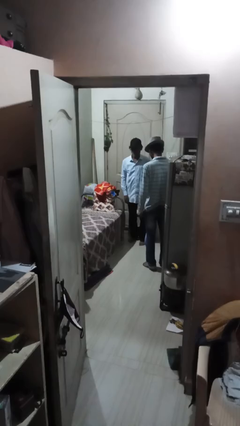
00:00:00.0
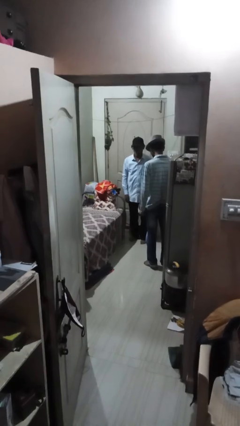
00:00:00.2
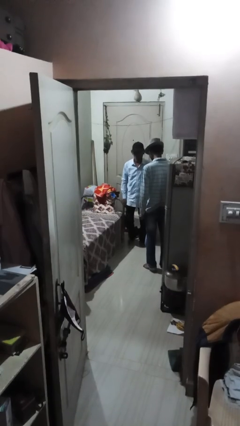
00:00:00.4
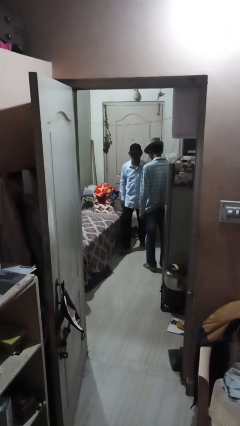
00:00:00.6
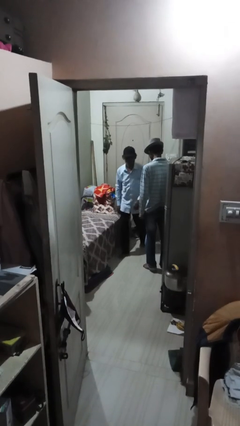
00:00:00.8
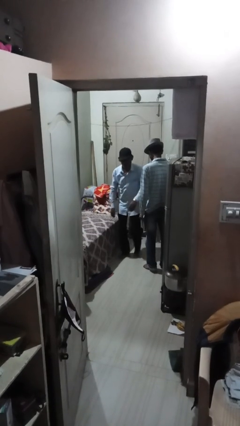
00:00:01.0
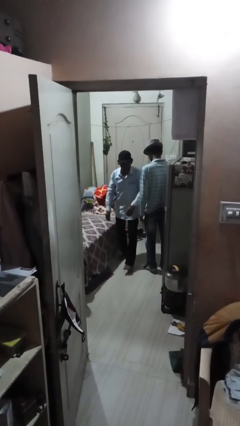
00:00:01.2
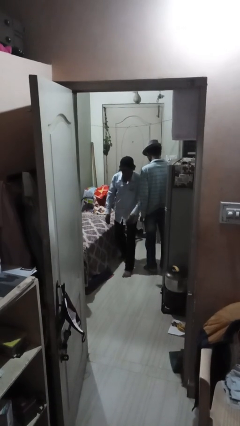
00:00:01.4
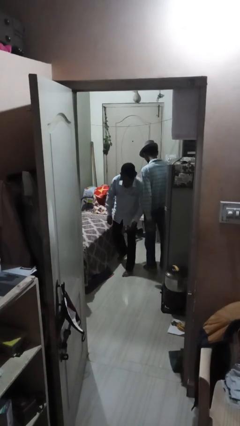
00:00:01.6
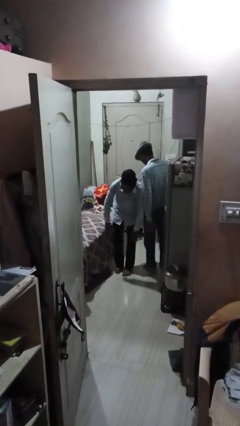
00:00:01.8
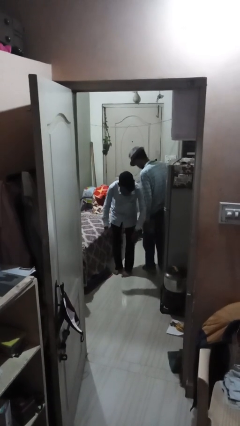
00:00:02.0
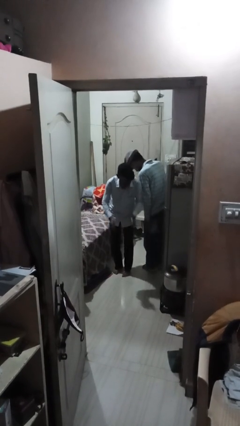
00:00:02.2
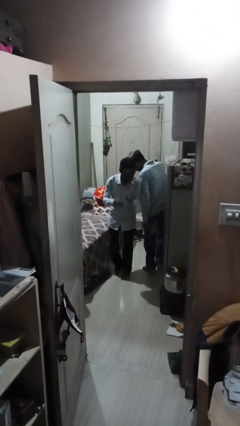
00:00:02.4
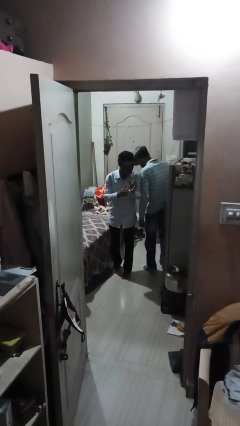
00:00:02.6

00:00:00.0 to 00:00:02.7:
person bumps into person

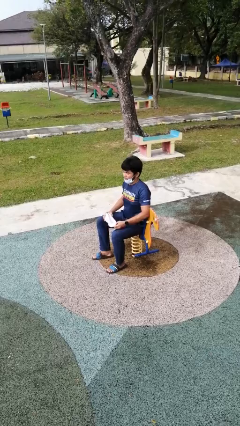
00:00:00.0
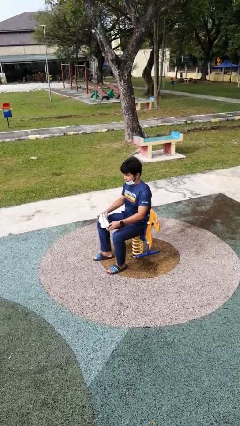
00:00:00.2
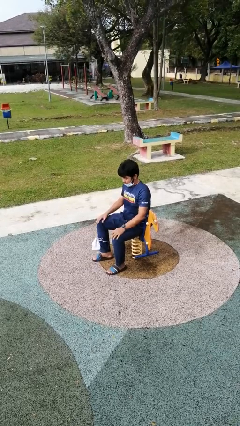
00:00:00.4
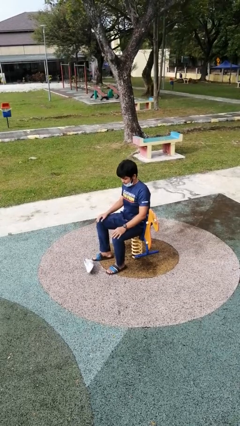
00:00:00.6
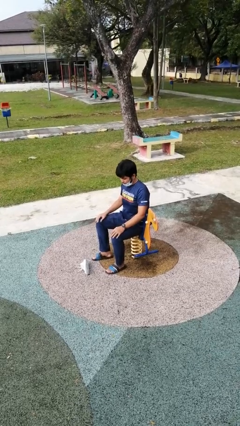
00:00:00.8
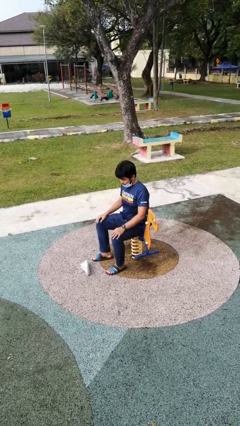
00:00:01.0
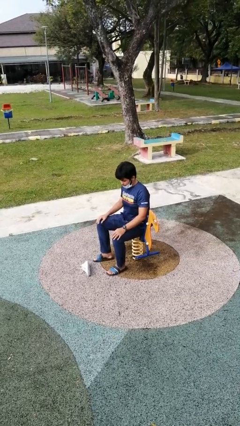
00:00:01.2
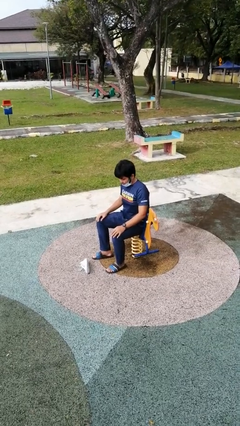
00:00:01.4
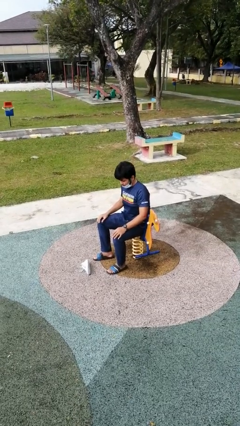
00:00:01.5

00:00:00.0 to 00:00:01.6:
person drops object

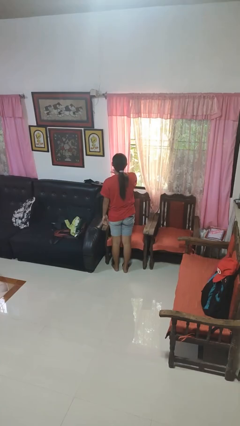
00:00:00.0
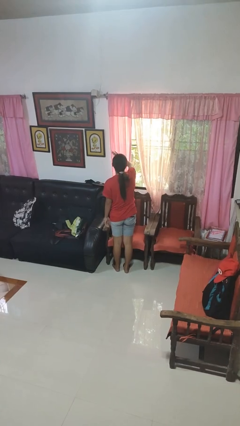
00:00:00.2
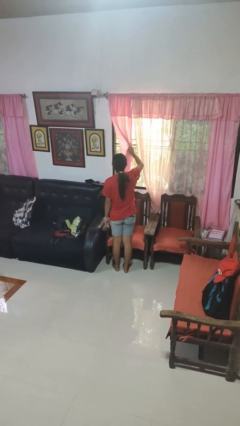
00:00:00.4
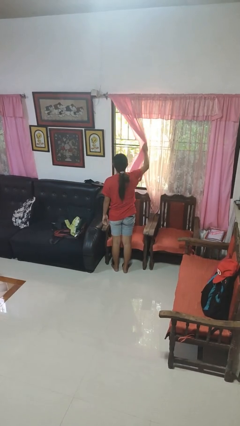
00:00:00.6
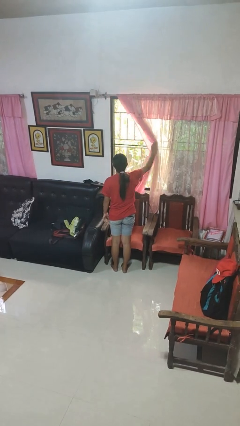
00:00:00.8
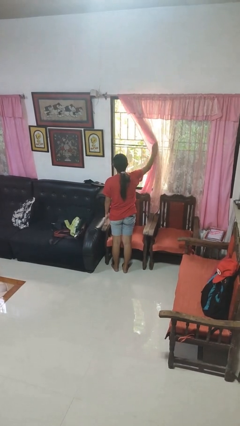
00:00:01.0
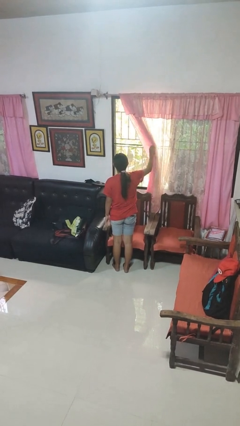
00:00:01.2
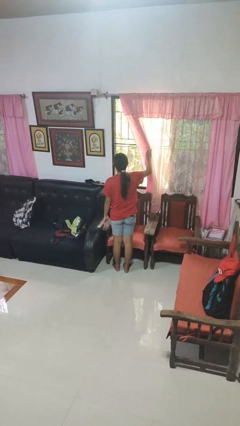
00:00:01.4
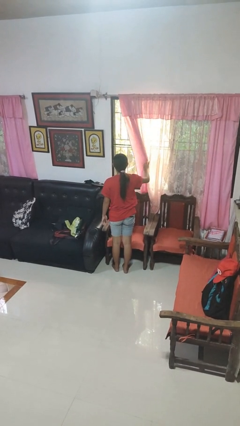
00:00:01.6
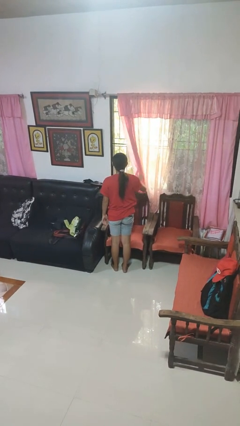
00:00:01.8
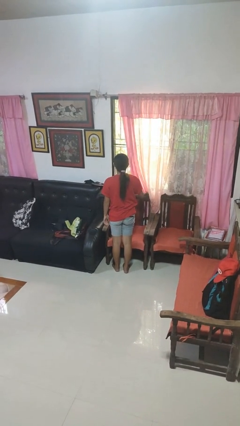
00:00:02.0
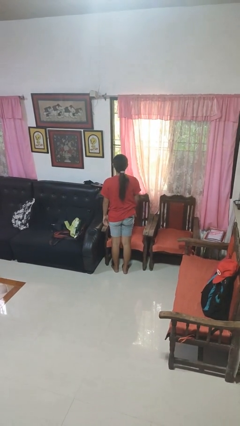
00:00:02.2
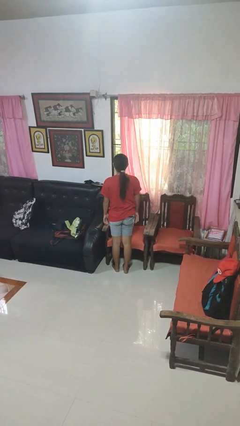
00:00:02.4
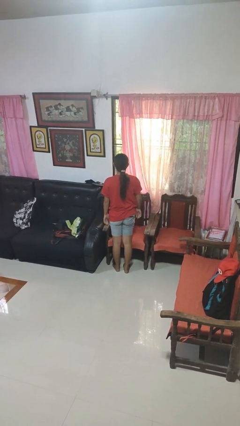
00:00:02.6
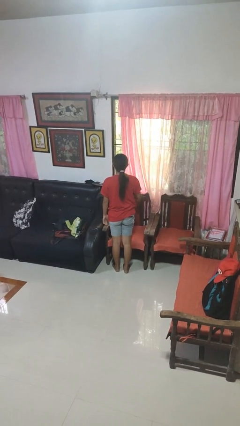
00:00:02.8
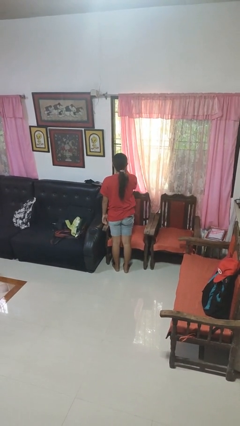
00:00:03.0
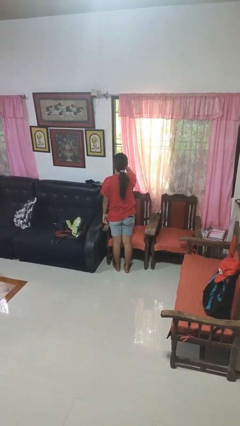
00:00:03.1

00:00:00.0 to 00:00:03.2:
person opens curtains

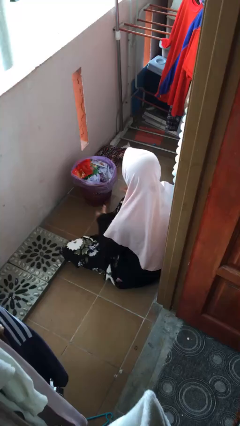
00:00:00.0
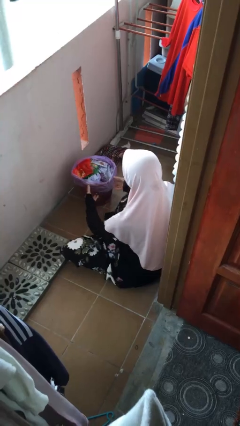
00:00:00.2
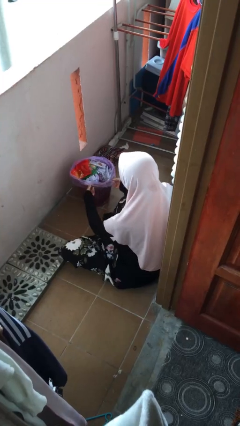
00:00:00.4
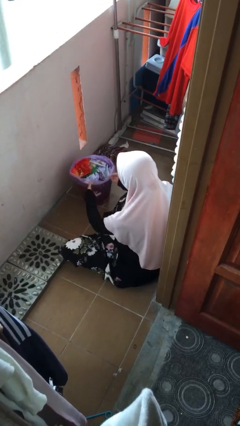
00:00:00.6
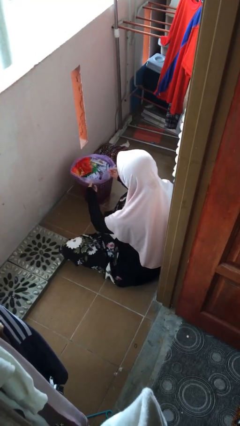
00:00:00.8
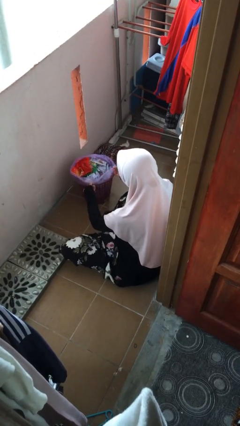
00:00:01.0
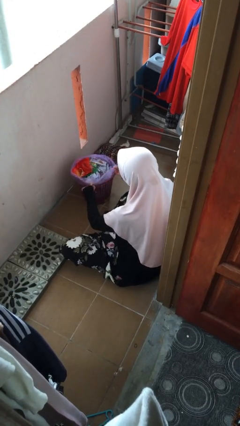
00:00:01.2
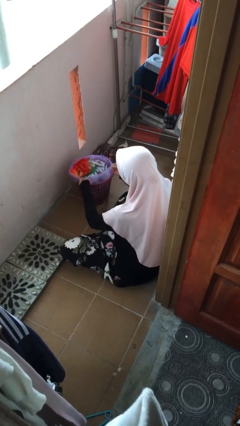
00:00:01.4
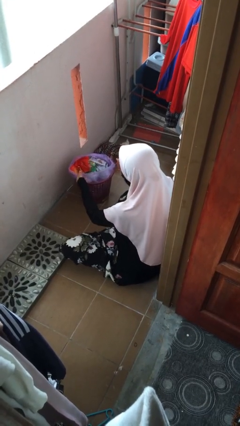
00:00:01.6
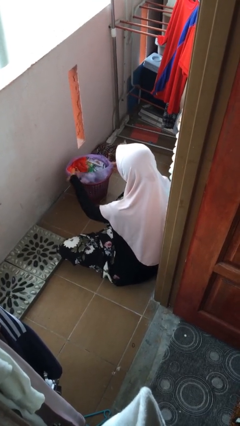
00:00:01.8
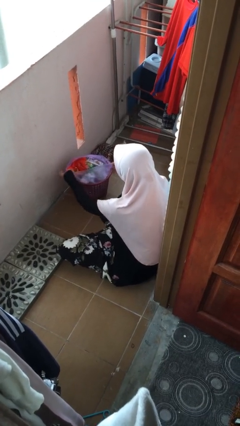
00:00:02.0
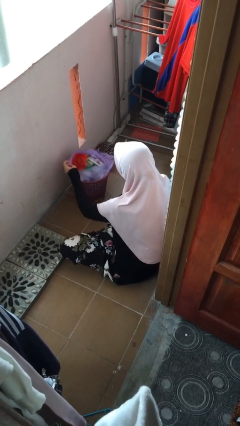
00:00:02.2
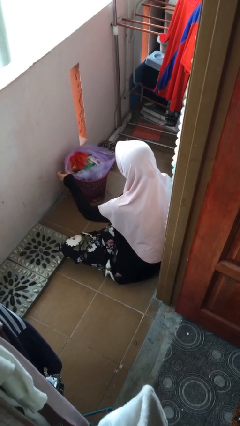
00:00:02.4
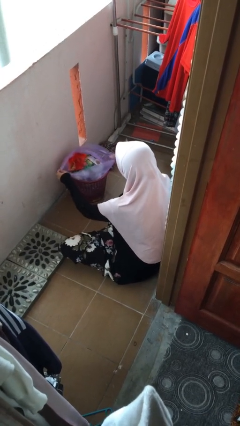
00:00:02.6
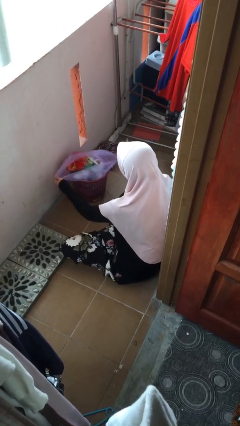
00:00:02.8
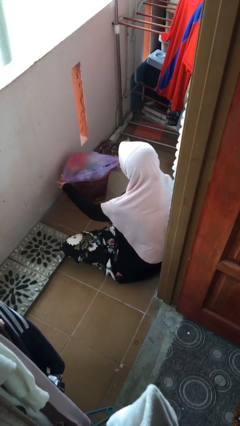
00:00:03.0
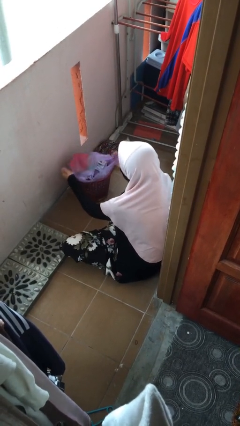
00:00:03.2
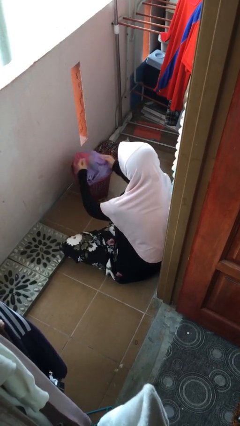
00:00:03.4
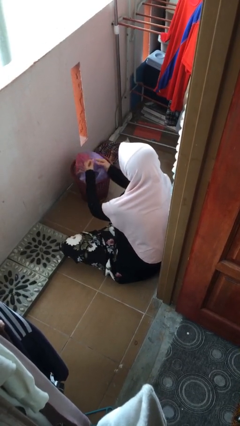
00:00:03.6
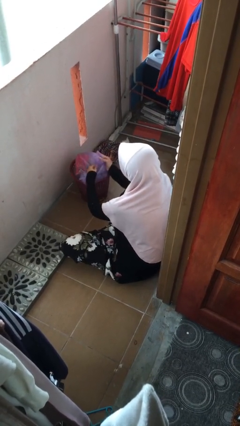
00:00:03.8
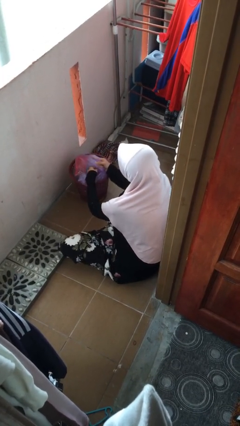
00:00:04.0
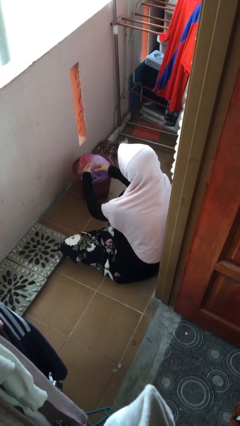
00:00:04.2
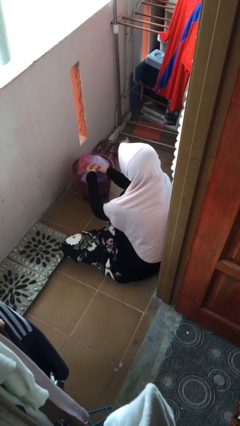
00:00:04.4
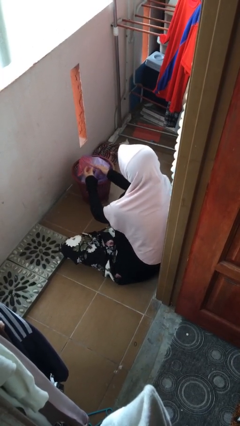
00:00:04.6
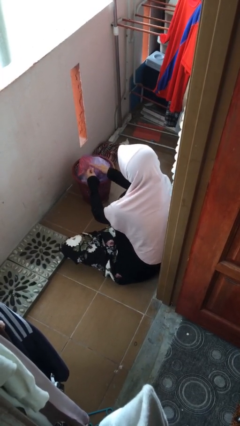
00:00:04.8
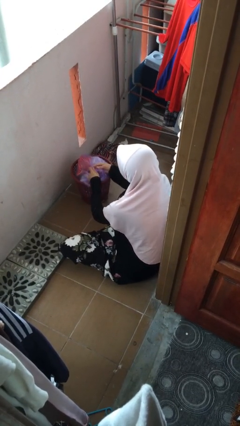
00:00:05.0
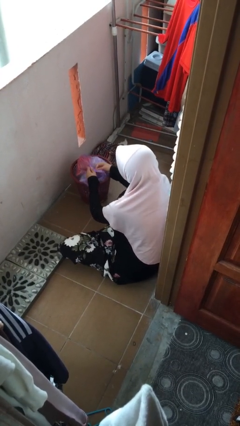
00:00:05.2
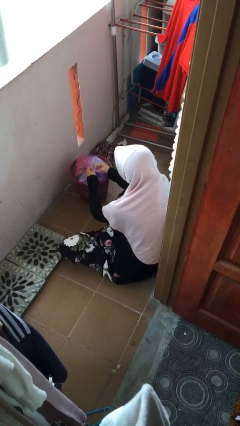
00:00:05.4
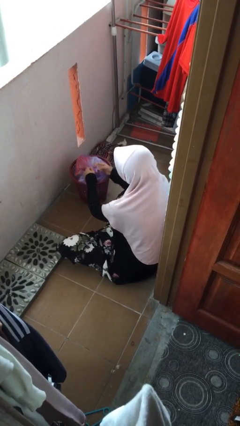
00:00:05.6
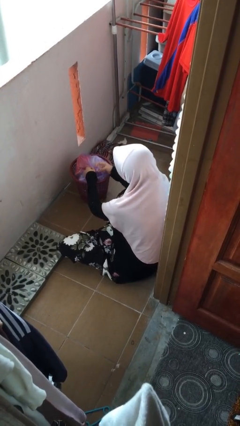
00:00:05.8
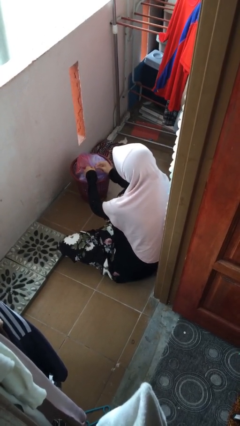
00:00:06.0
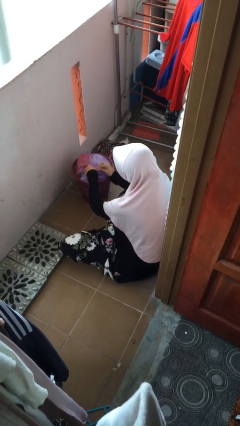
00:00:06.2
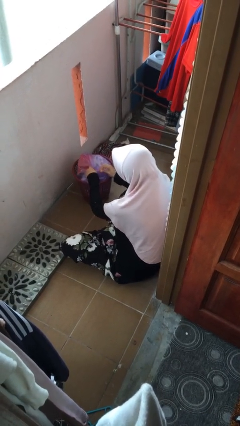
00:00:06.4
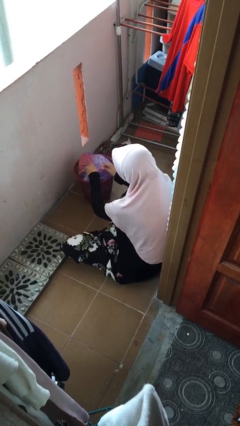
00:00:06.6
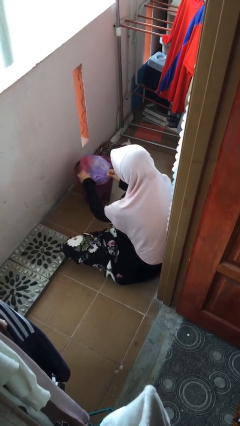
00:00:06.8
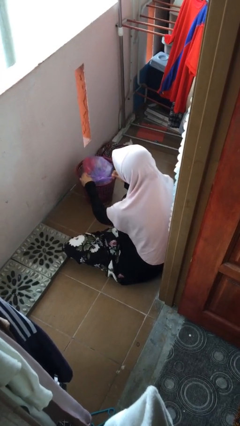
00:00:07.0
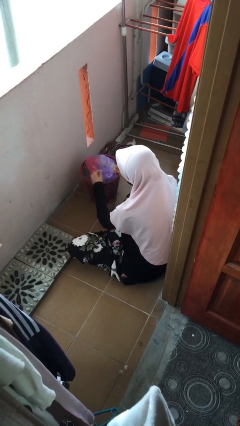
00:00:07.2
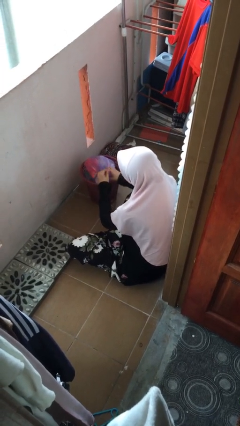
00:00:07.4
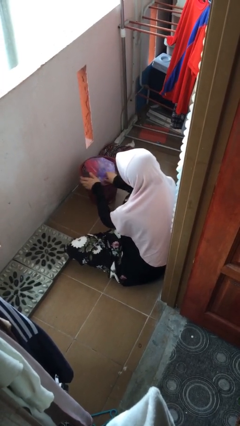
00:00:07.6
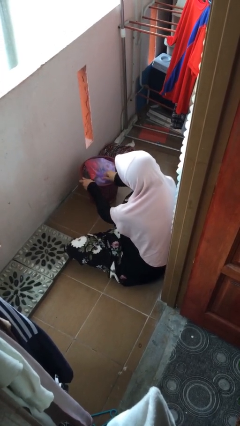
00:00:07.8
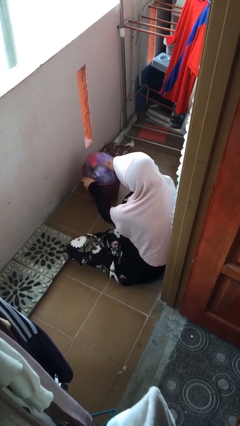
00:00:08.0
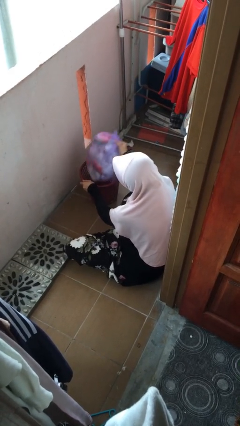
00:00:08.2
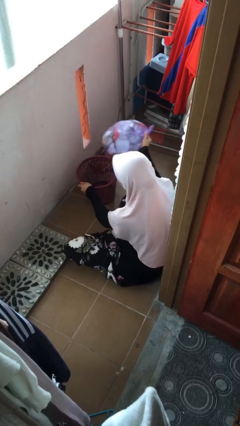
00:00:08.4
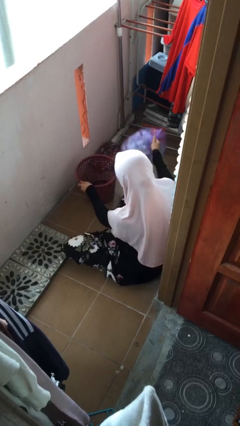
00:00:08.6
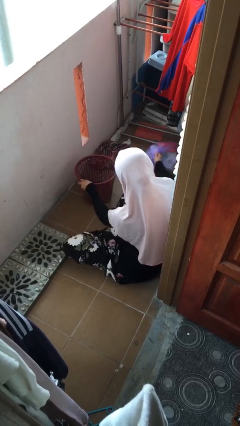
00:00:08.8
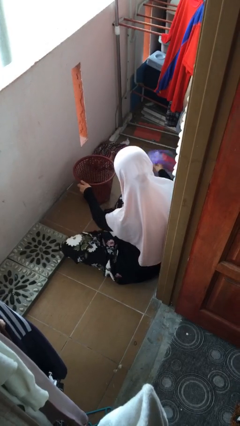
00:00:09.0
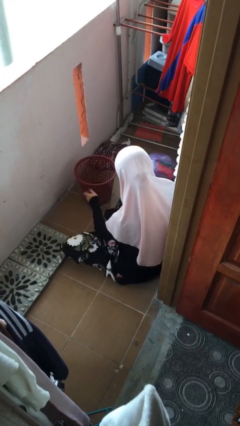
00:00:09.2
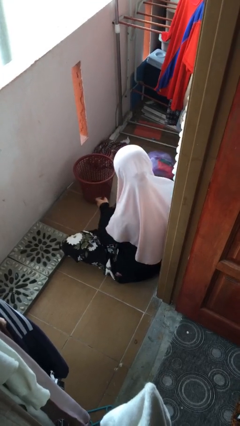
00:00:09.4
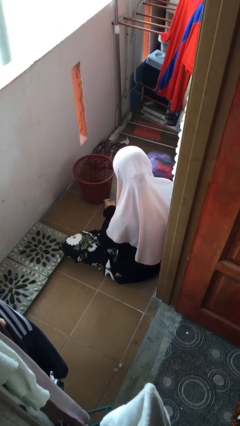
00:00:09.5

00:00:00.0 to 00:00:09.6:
person removes trashbag from trashcan

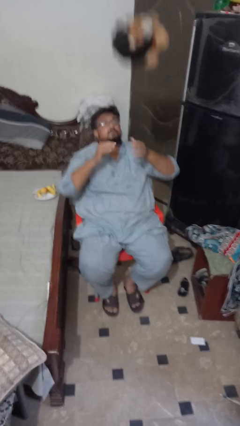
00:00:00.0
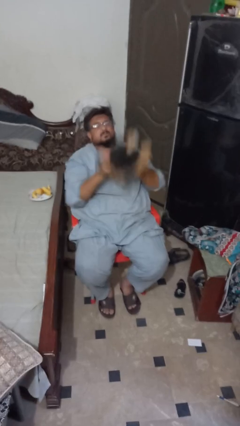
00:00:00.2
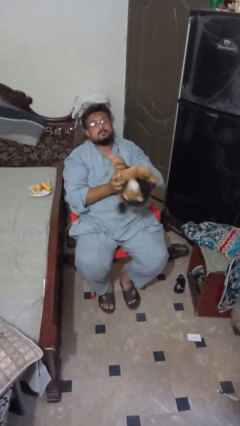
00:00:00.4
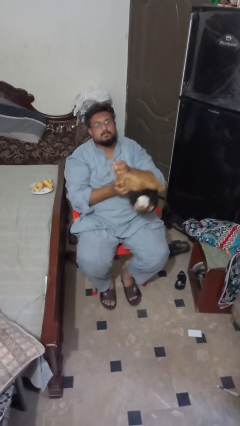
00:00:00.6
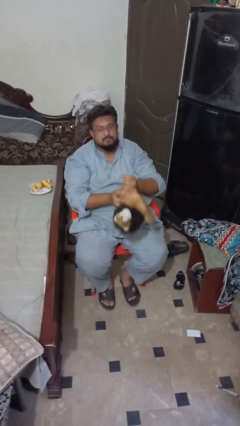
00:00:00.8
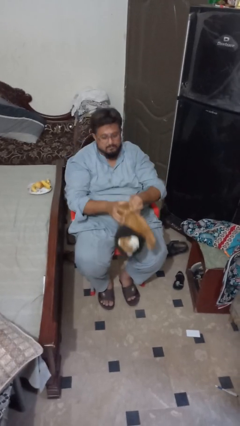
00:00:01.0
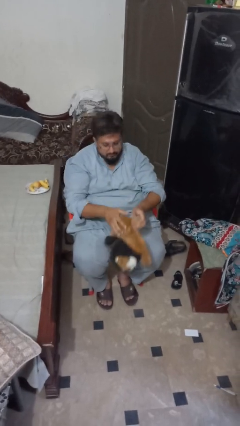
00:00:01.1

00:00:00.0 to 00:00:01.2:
person catches dropped object
